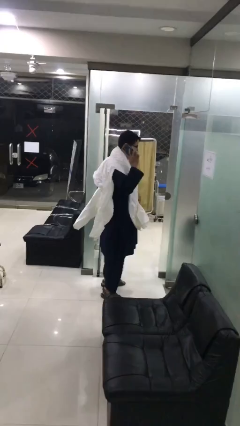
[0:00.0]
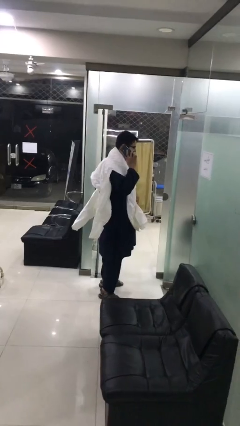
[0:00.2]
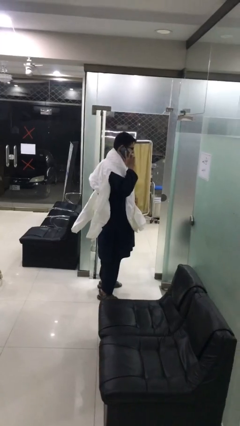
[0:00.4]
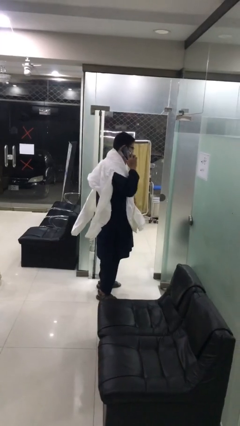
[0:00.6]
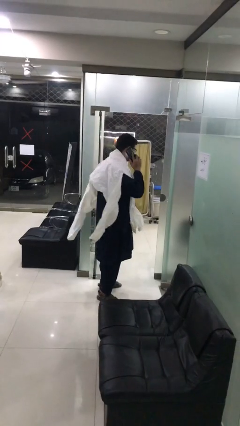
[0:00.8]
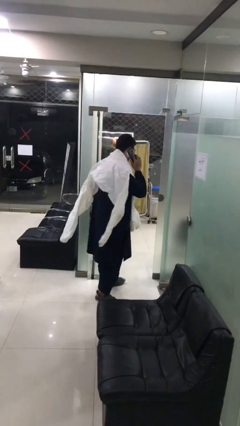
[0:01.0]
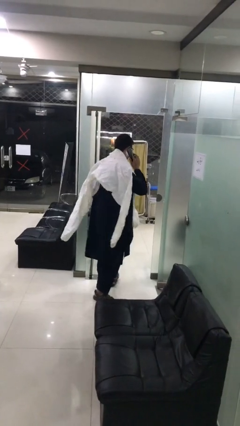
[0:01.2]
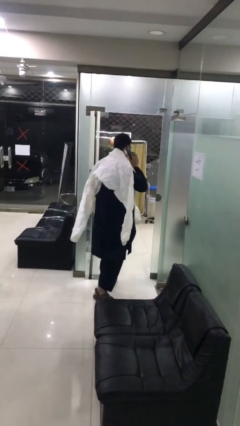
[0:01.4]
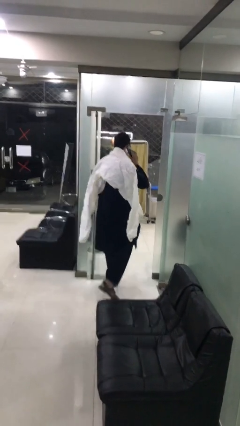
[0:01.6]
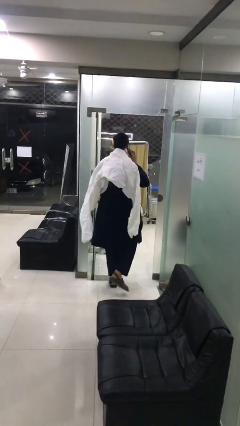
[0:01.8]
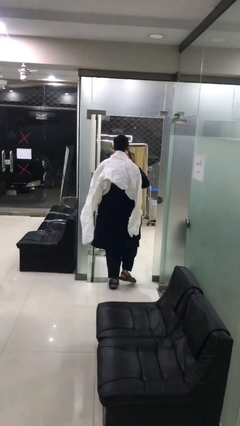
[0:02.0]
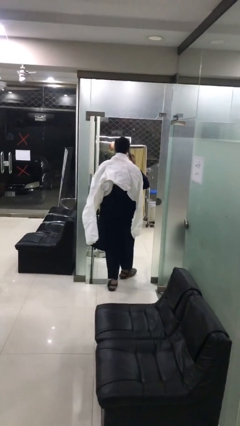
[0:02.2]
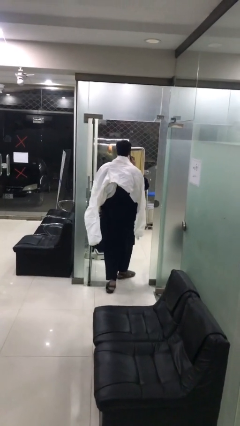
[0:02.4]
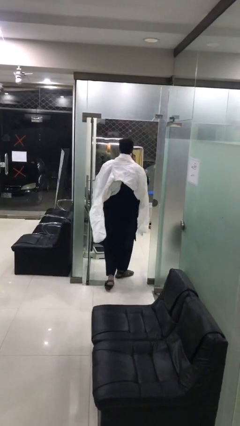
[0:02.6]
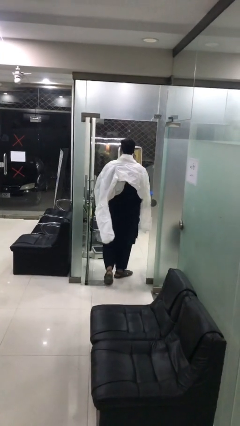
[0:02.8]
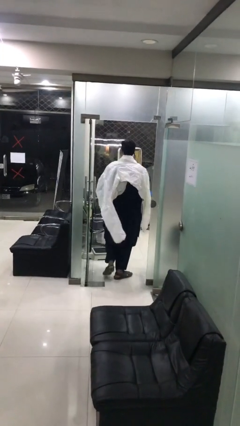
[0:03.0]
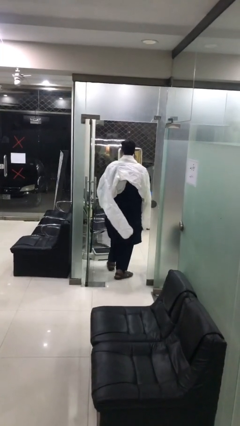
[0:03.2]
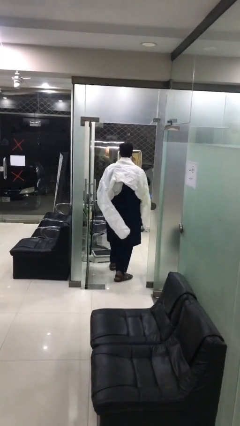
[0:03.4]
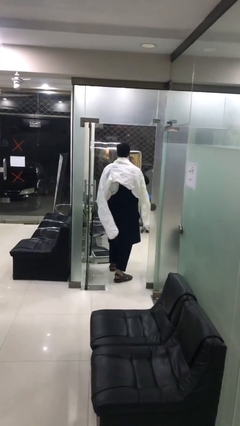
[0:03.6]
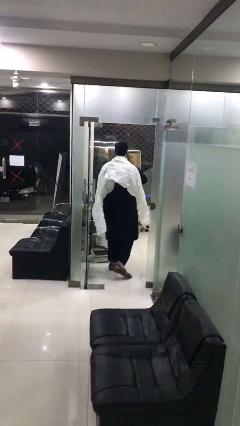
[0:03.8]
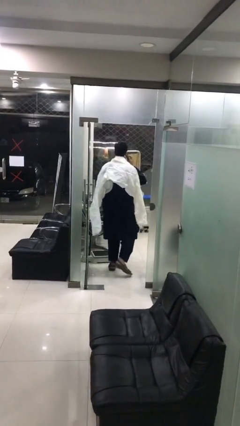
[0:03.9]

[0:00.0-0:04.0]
person exits scene through structure

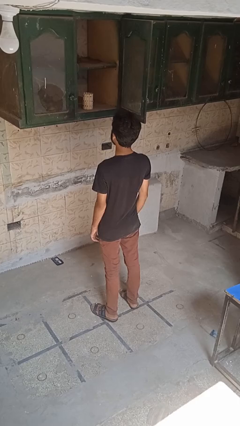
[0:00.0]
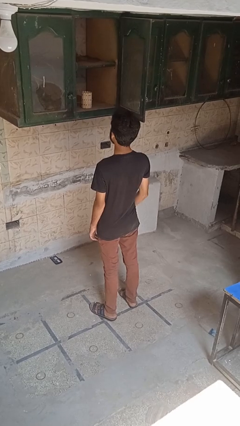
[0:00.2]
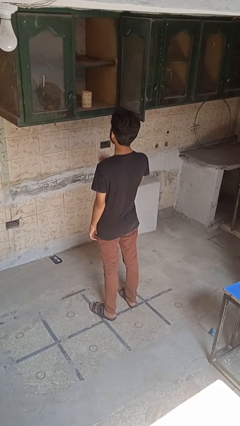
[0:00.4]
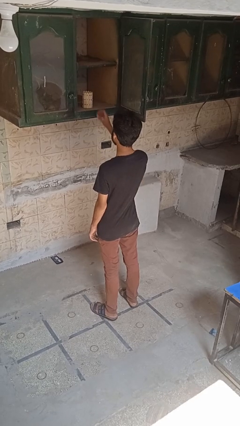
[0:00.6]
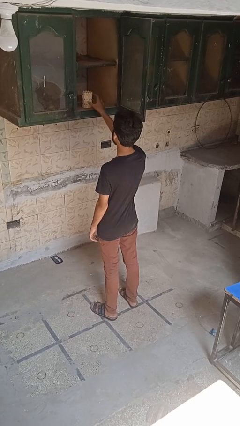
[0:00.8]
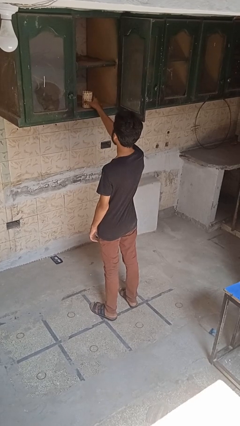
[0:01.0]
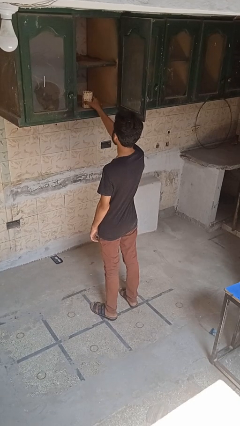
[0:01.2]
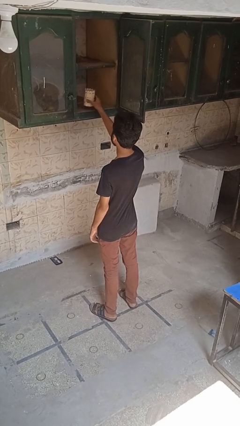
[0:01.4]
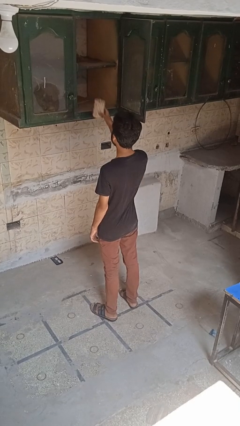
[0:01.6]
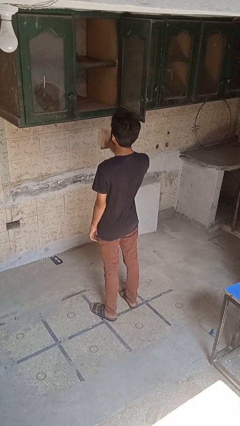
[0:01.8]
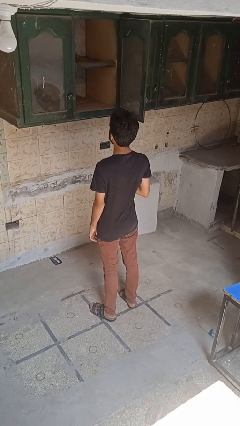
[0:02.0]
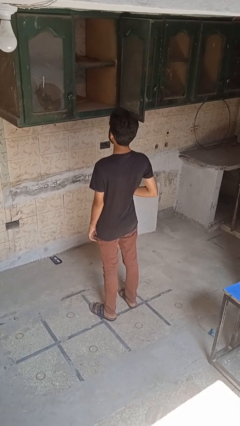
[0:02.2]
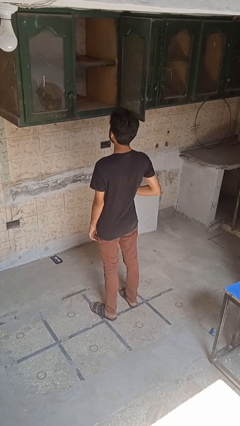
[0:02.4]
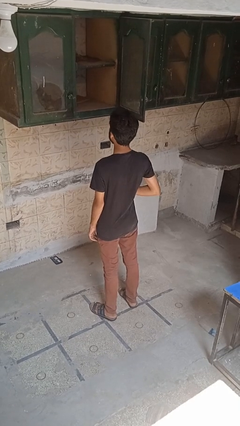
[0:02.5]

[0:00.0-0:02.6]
person picks up object from cabinet

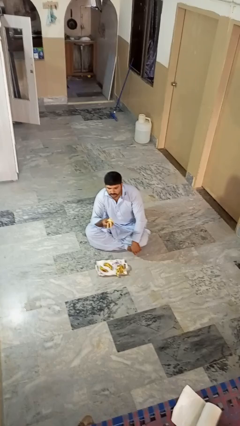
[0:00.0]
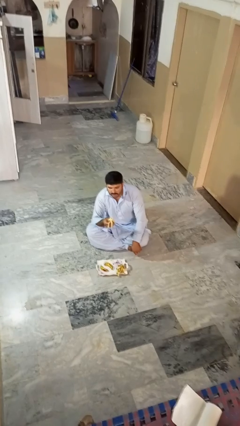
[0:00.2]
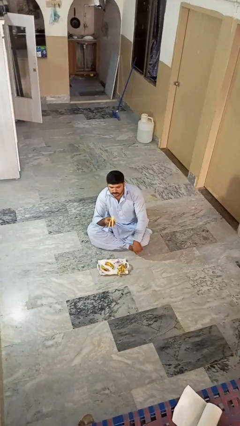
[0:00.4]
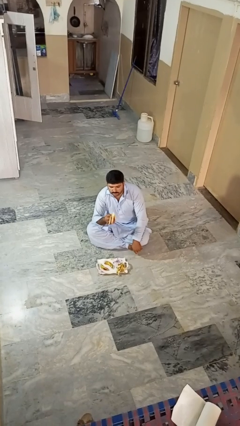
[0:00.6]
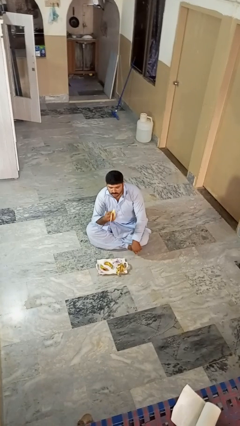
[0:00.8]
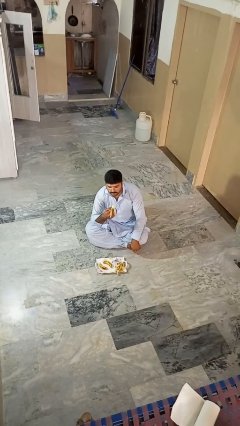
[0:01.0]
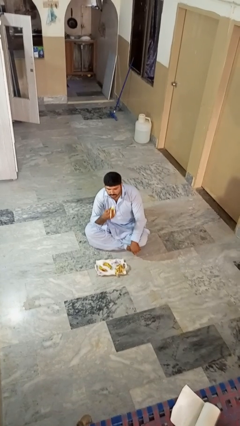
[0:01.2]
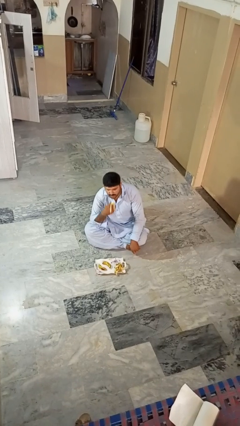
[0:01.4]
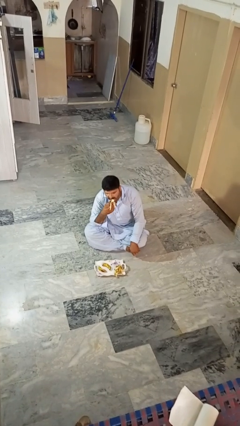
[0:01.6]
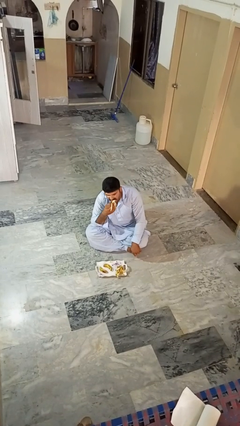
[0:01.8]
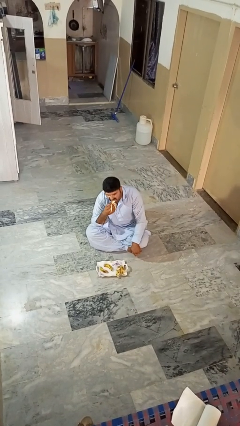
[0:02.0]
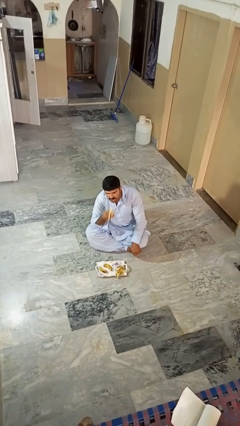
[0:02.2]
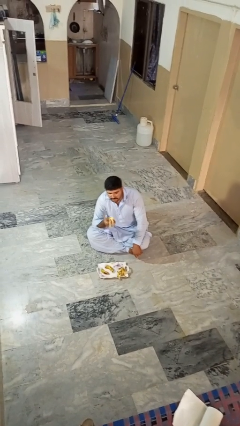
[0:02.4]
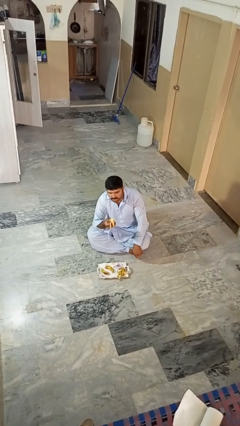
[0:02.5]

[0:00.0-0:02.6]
person eats banana

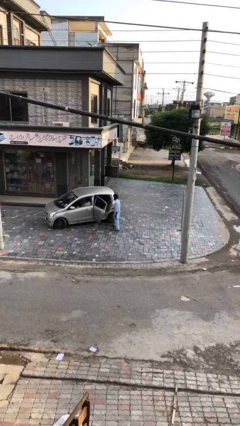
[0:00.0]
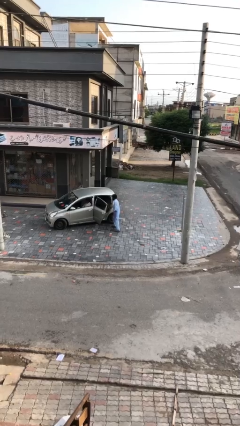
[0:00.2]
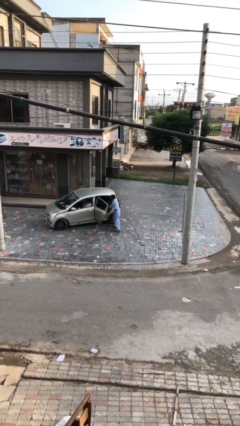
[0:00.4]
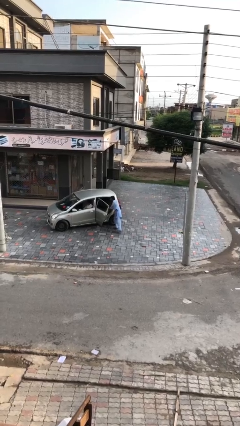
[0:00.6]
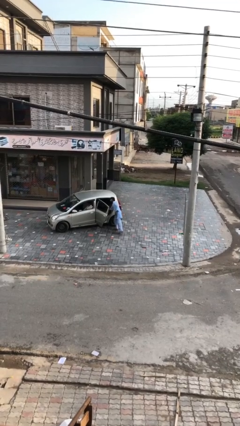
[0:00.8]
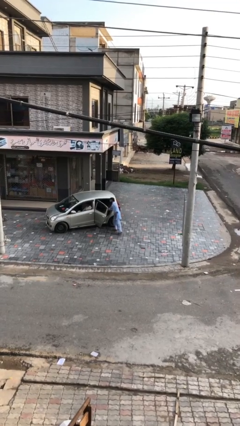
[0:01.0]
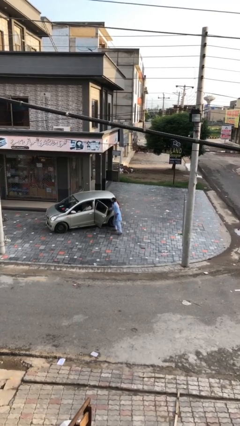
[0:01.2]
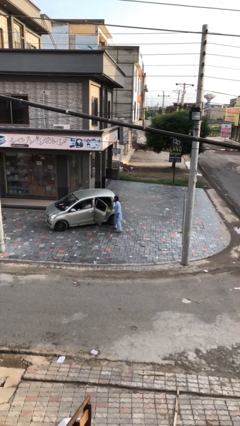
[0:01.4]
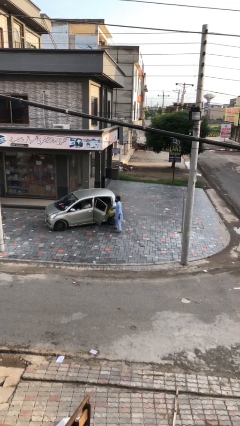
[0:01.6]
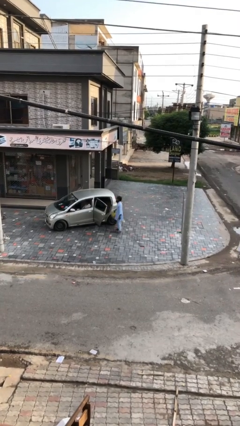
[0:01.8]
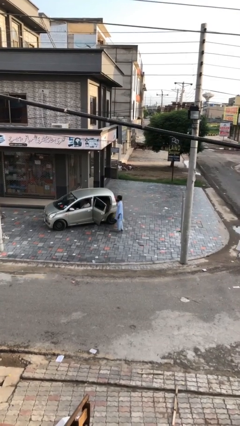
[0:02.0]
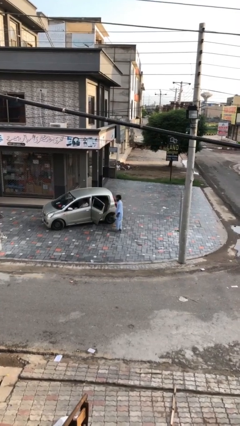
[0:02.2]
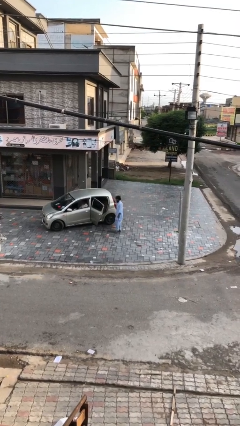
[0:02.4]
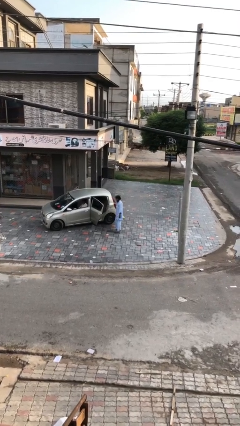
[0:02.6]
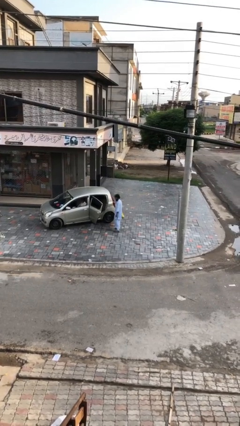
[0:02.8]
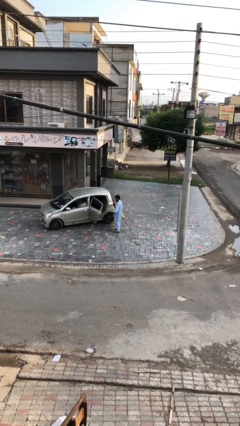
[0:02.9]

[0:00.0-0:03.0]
person unloads car

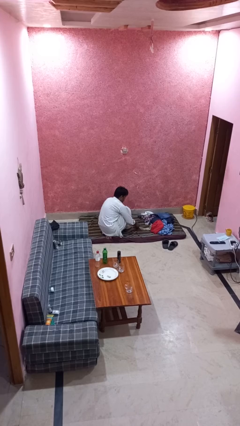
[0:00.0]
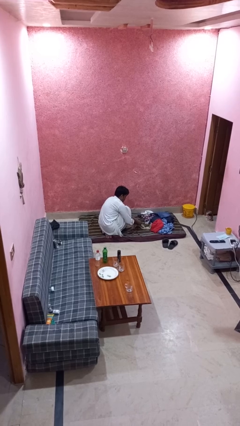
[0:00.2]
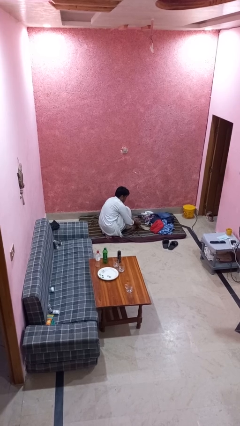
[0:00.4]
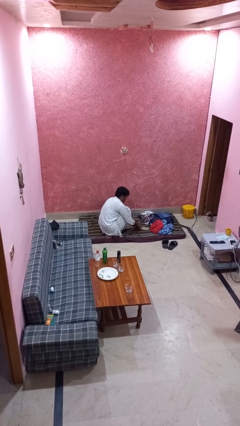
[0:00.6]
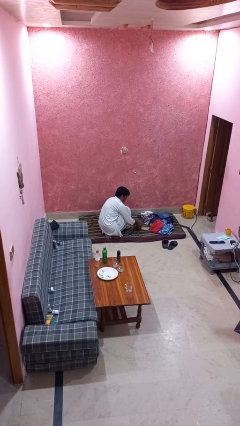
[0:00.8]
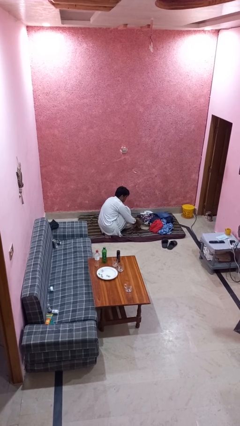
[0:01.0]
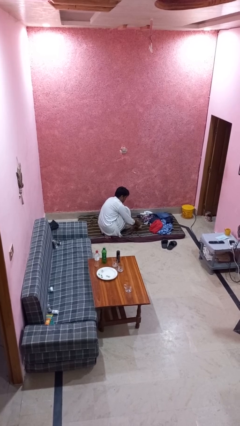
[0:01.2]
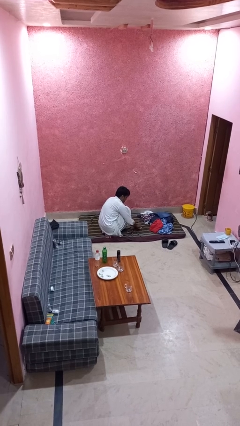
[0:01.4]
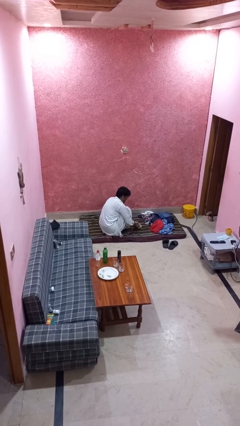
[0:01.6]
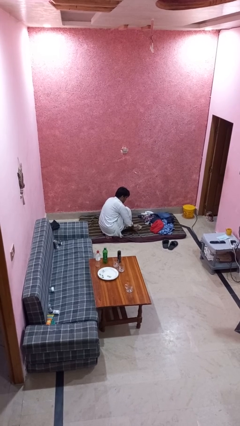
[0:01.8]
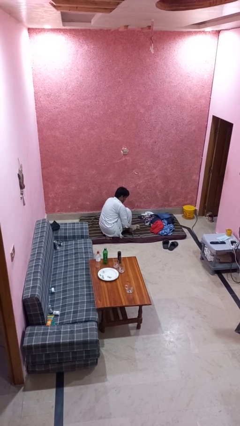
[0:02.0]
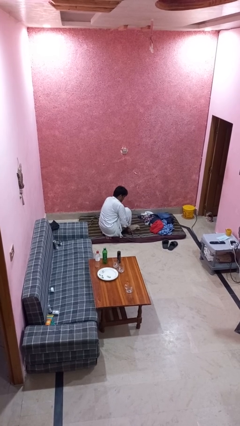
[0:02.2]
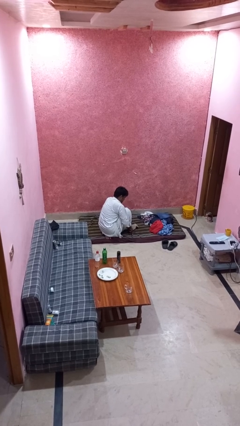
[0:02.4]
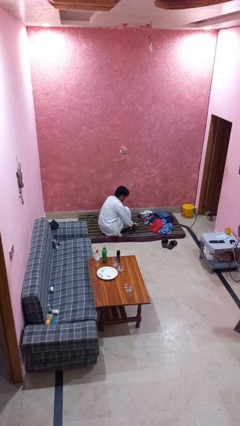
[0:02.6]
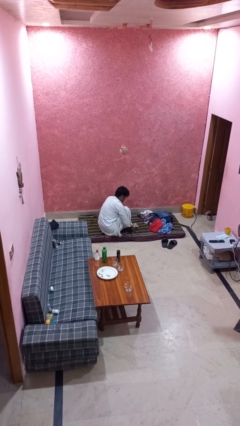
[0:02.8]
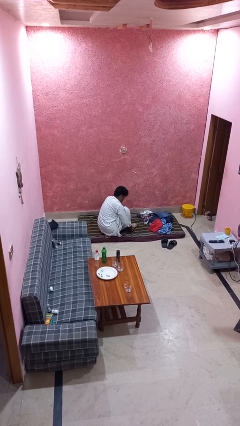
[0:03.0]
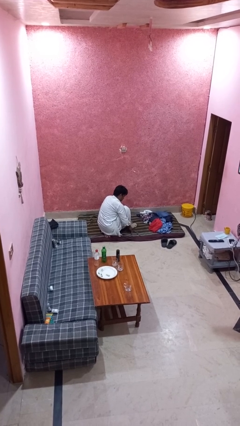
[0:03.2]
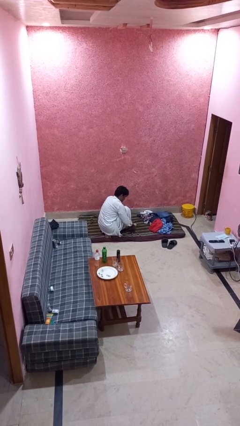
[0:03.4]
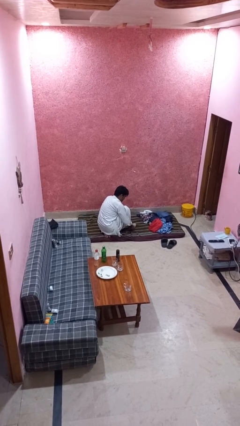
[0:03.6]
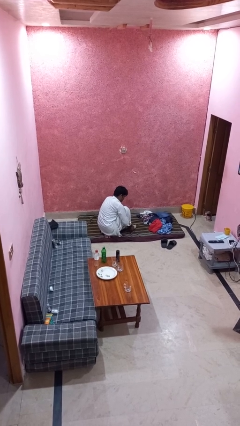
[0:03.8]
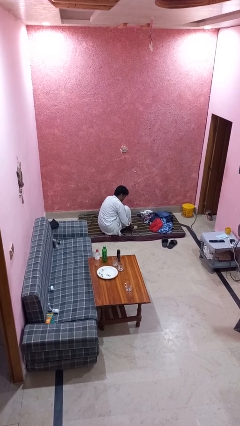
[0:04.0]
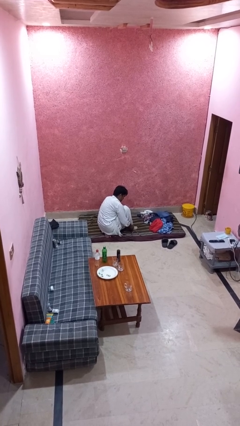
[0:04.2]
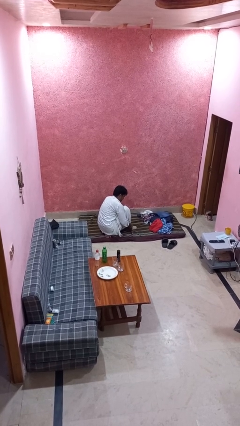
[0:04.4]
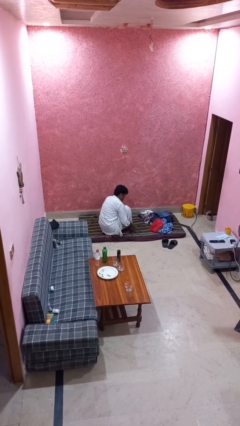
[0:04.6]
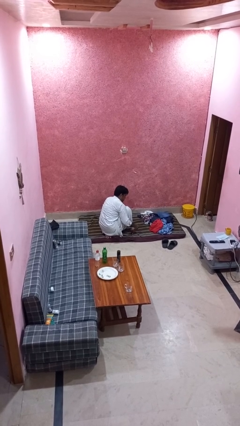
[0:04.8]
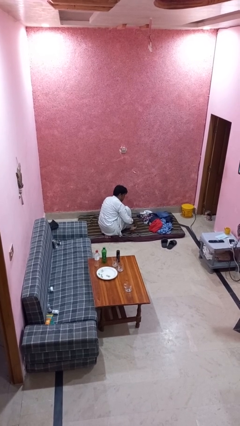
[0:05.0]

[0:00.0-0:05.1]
person puts on socks

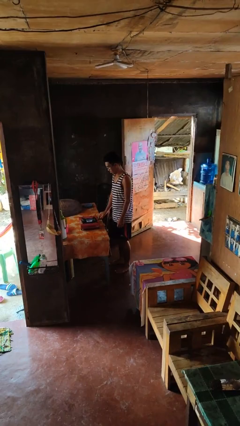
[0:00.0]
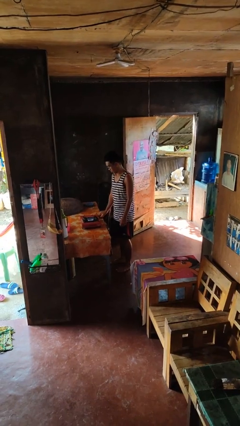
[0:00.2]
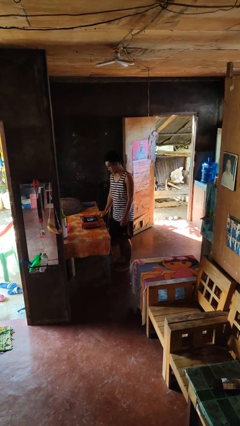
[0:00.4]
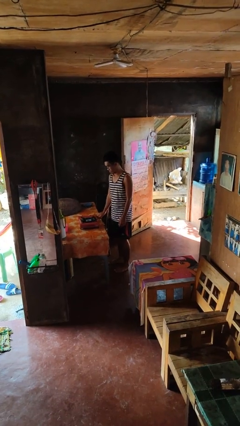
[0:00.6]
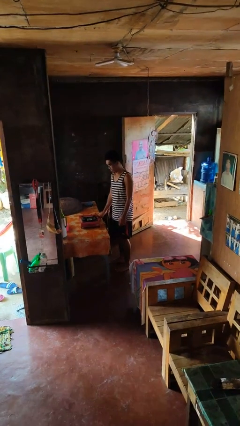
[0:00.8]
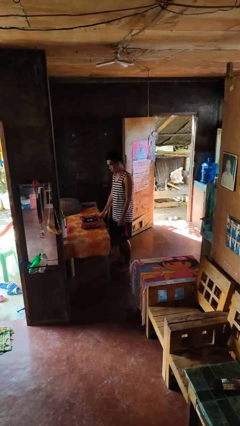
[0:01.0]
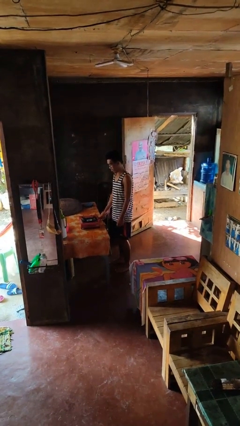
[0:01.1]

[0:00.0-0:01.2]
person turns off stovetop
